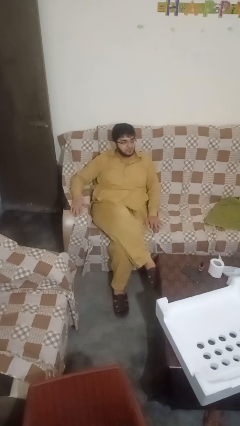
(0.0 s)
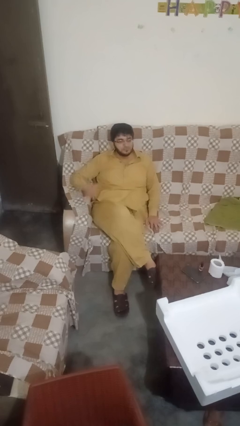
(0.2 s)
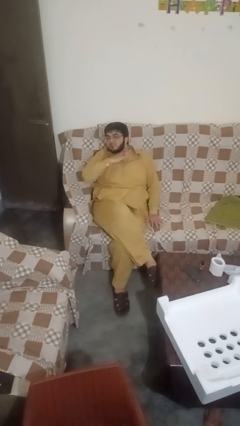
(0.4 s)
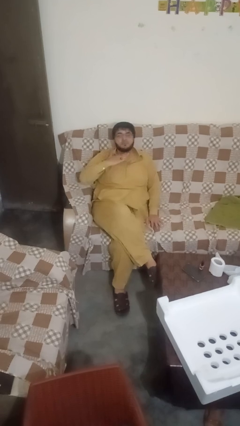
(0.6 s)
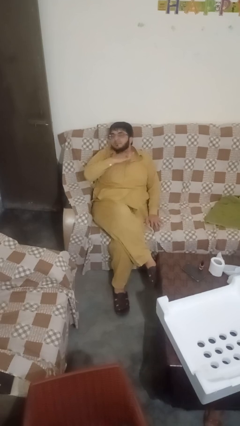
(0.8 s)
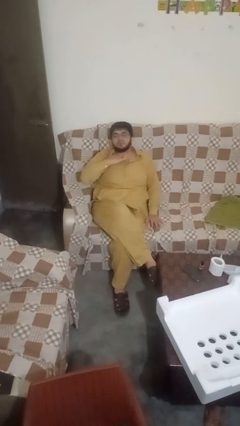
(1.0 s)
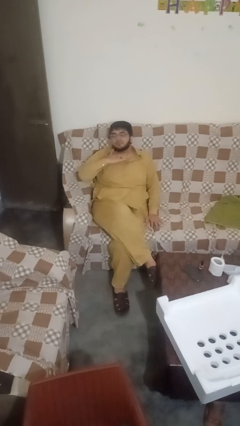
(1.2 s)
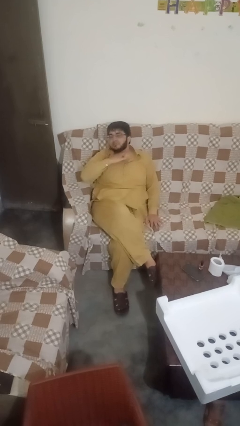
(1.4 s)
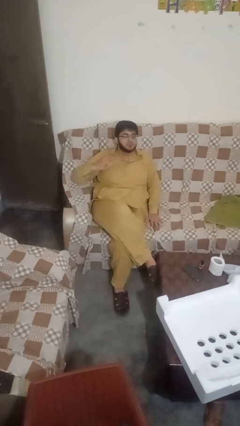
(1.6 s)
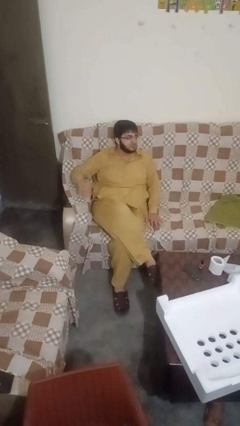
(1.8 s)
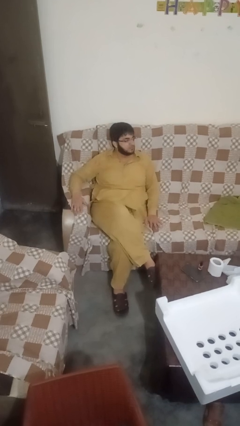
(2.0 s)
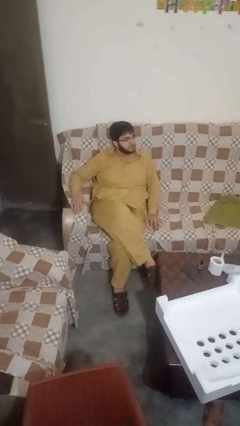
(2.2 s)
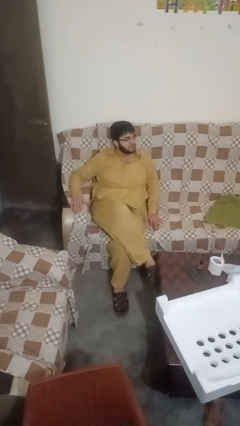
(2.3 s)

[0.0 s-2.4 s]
person gestures cut

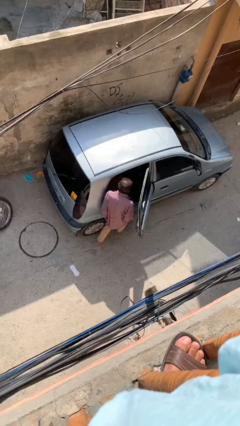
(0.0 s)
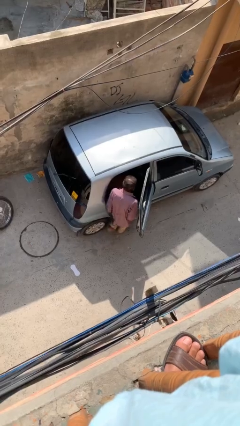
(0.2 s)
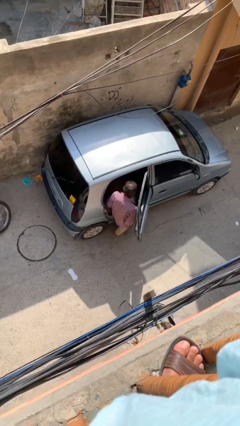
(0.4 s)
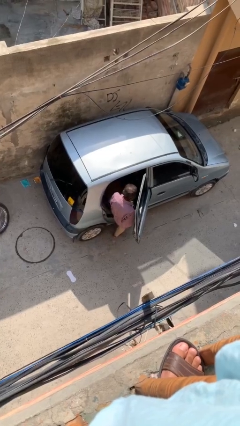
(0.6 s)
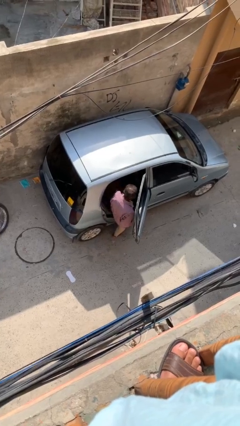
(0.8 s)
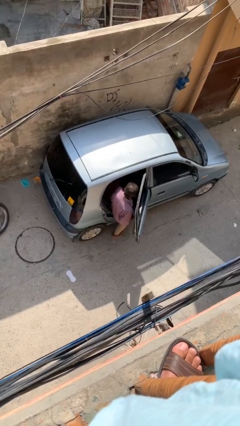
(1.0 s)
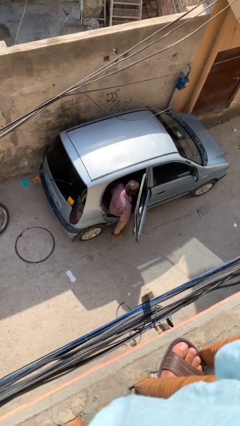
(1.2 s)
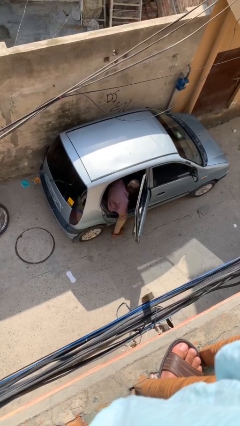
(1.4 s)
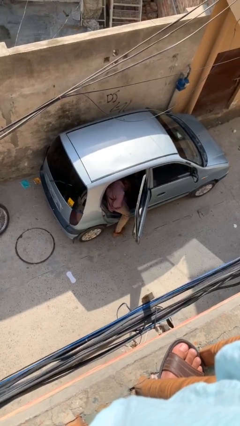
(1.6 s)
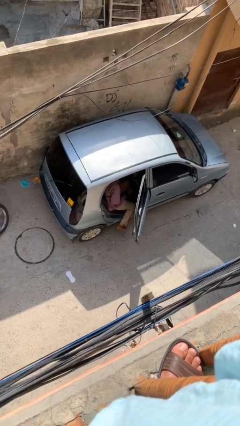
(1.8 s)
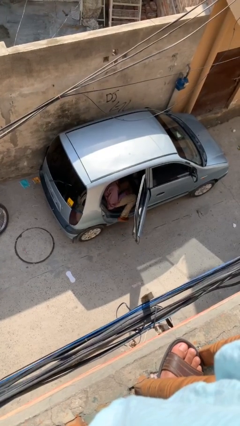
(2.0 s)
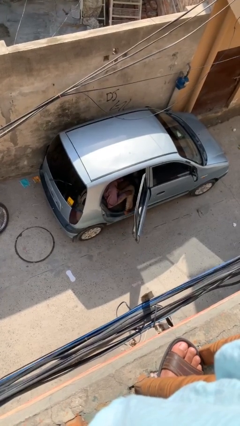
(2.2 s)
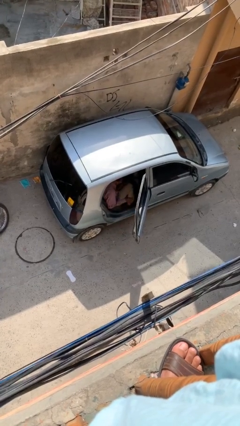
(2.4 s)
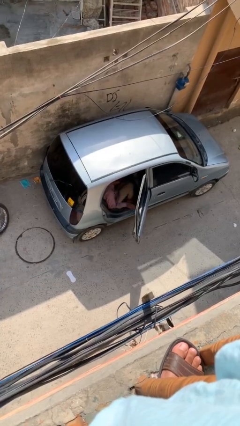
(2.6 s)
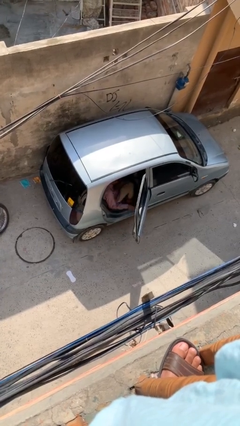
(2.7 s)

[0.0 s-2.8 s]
person enters car

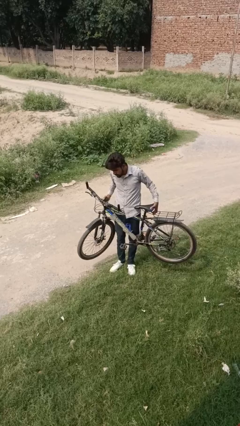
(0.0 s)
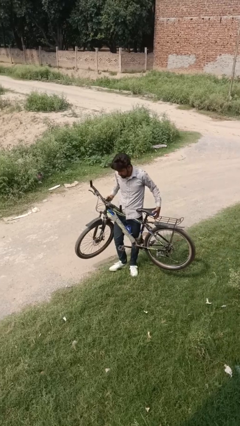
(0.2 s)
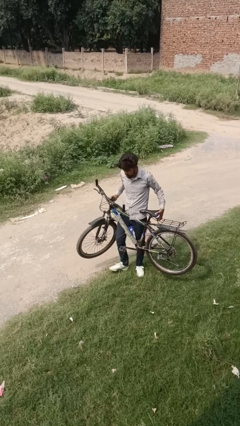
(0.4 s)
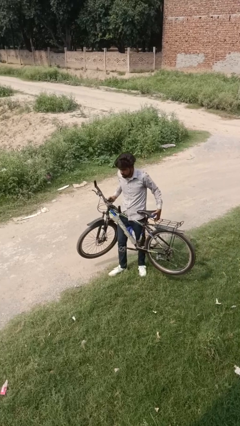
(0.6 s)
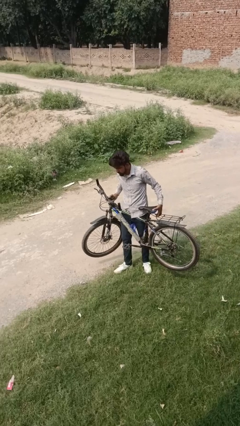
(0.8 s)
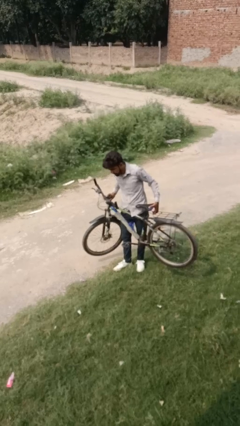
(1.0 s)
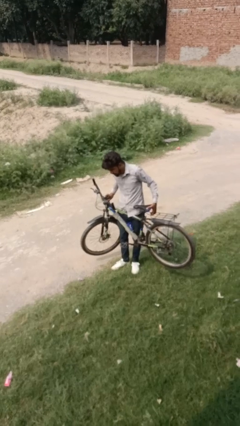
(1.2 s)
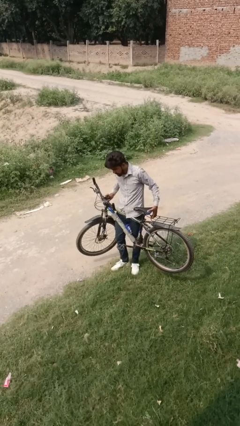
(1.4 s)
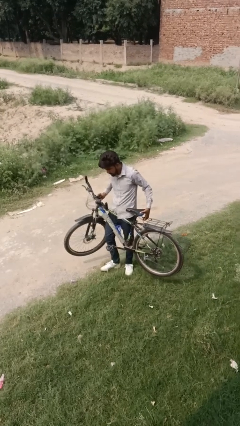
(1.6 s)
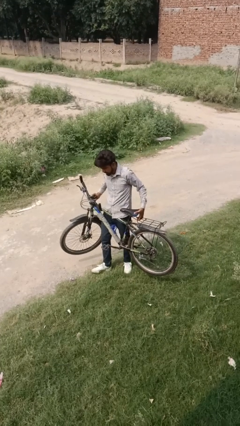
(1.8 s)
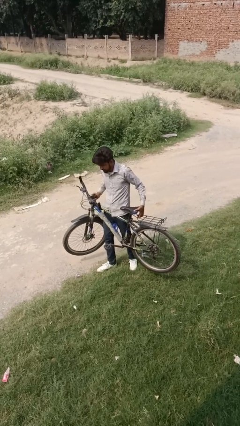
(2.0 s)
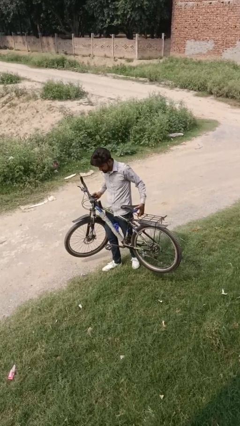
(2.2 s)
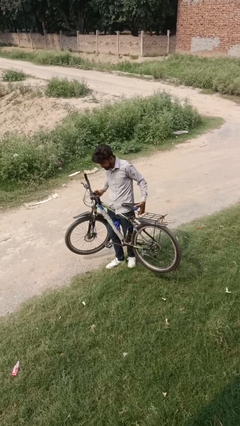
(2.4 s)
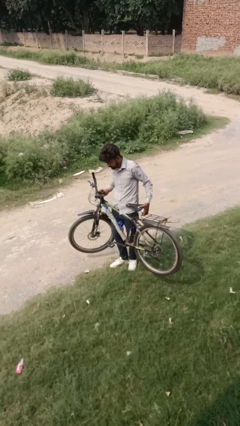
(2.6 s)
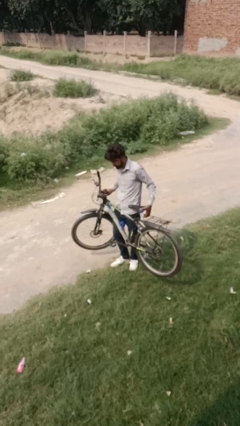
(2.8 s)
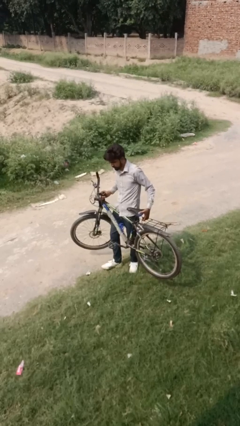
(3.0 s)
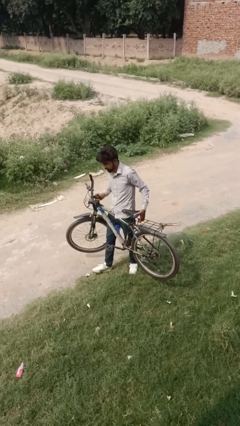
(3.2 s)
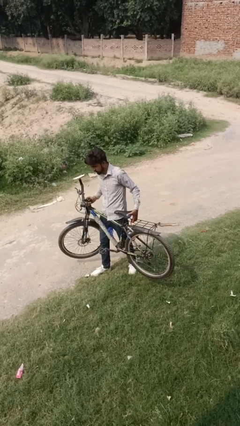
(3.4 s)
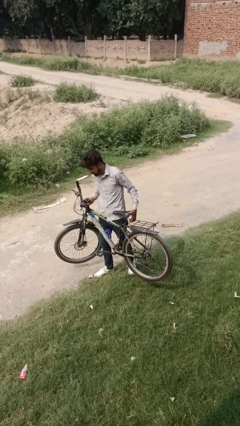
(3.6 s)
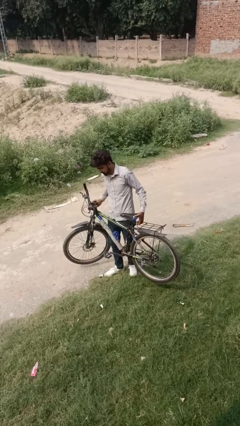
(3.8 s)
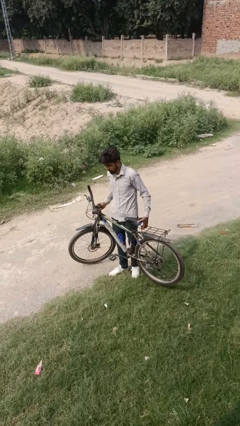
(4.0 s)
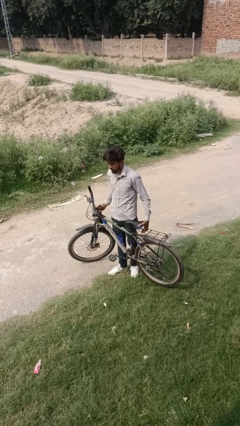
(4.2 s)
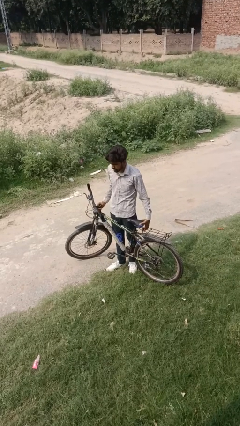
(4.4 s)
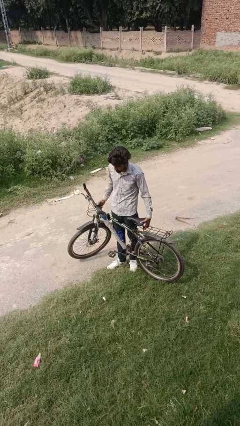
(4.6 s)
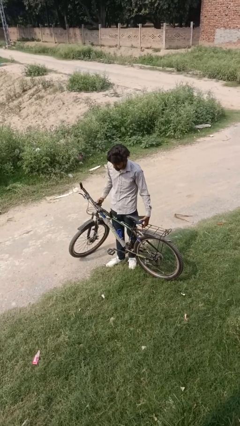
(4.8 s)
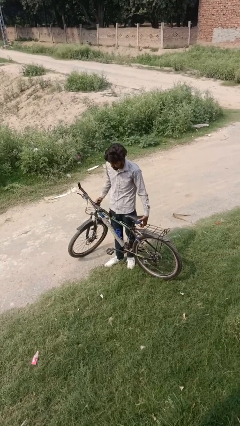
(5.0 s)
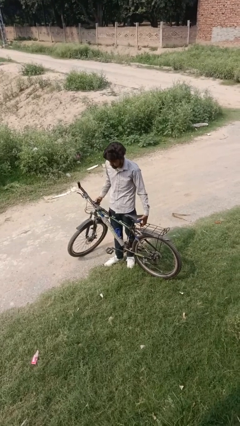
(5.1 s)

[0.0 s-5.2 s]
person carries bicycle

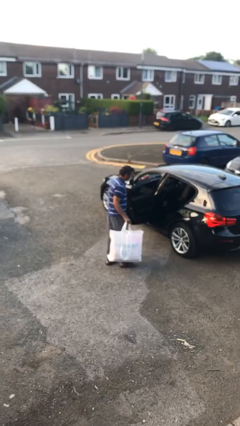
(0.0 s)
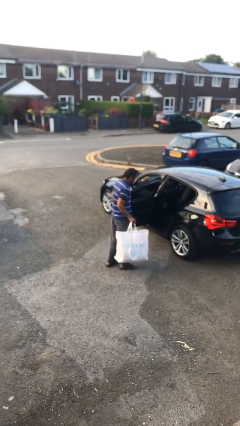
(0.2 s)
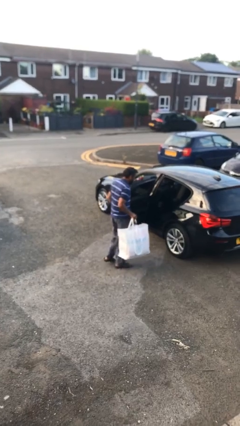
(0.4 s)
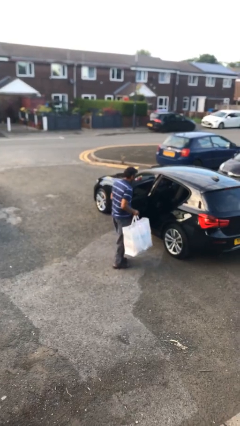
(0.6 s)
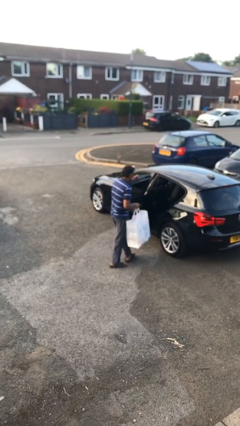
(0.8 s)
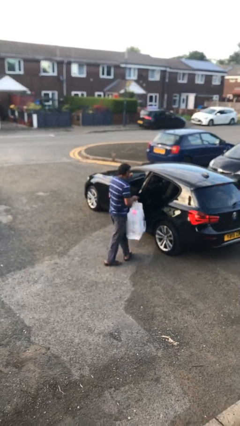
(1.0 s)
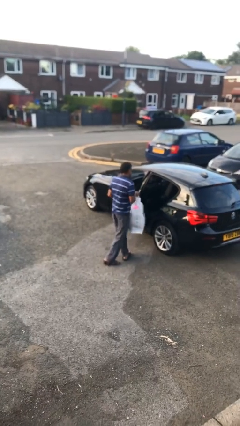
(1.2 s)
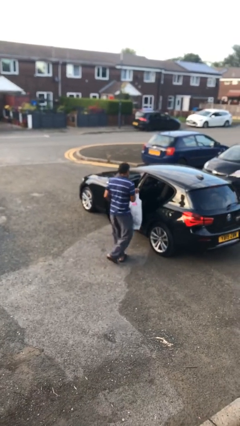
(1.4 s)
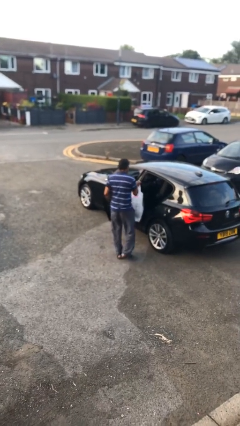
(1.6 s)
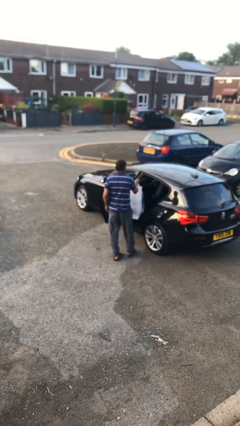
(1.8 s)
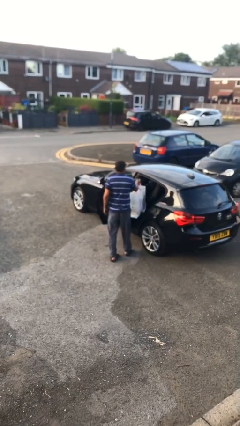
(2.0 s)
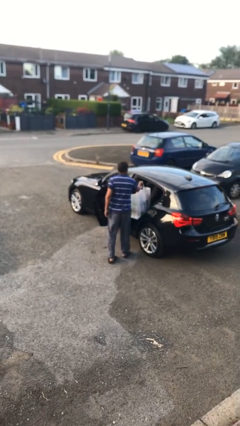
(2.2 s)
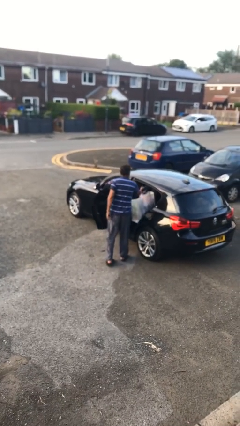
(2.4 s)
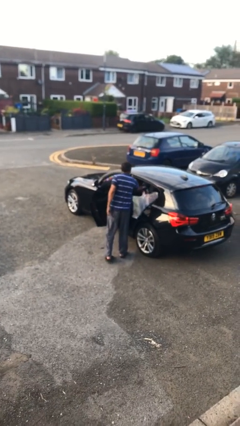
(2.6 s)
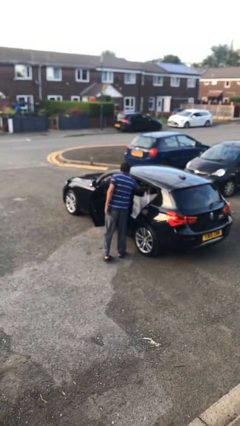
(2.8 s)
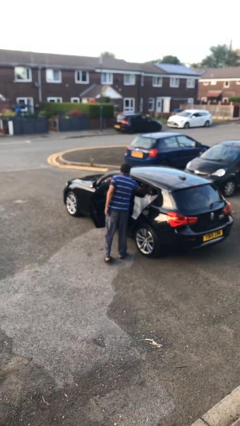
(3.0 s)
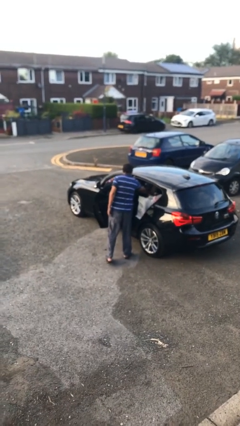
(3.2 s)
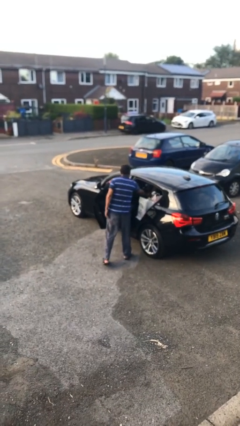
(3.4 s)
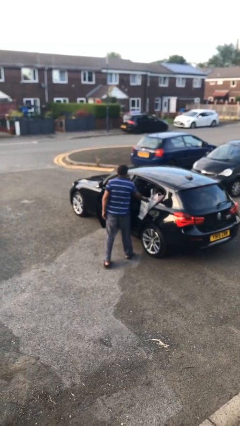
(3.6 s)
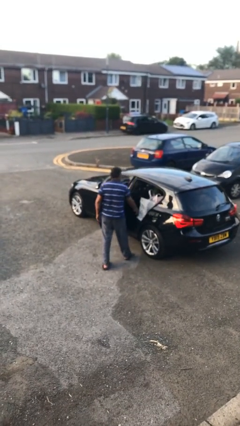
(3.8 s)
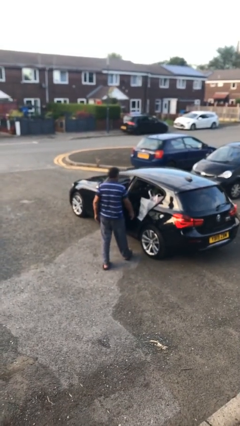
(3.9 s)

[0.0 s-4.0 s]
person loads car

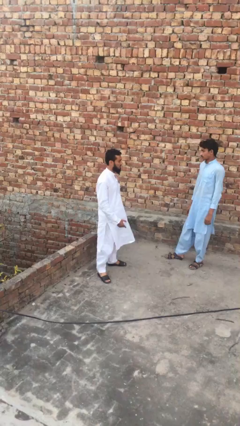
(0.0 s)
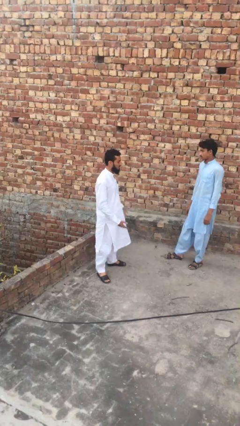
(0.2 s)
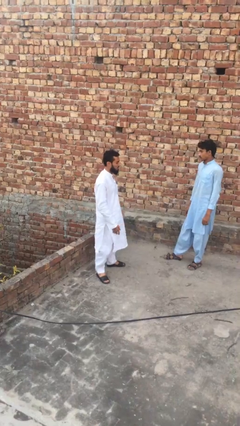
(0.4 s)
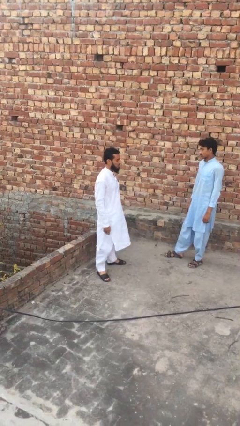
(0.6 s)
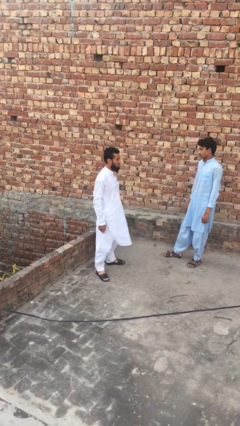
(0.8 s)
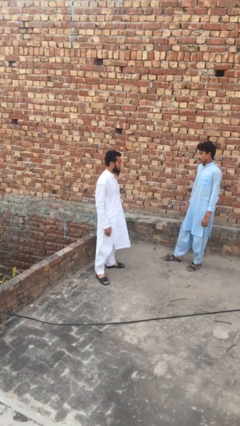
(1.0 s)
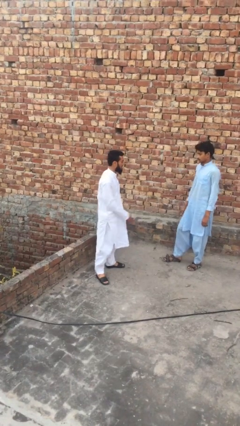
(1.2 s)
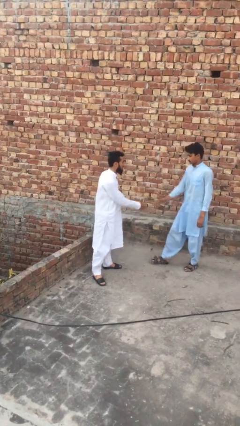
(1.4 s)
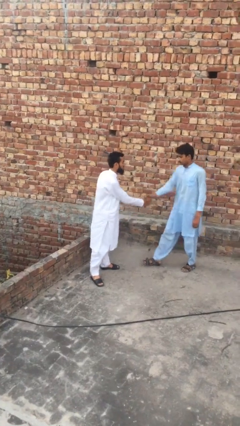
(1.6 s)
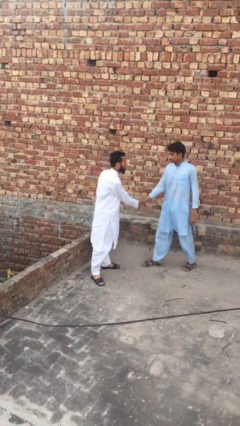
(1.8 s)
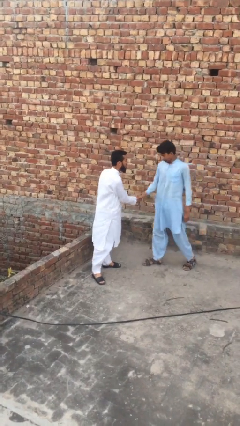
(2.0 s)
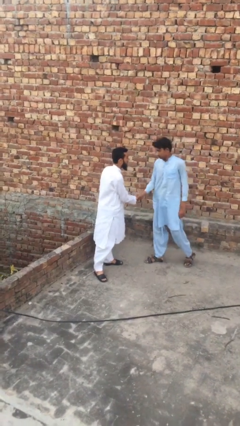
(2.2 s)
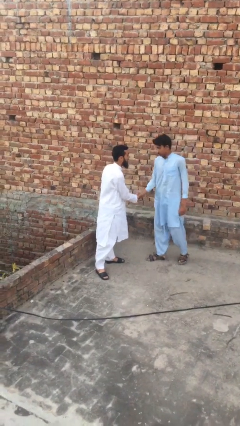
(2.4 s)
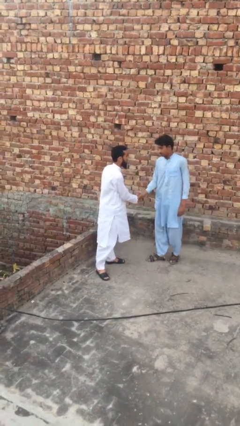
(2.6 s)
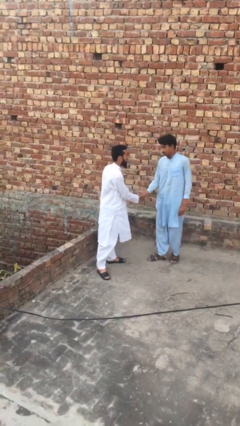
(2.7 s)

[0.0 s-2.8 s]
person shakes hand
